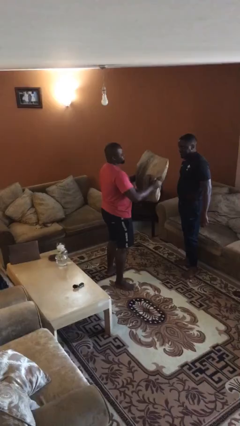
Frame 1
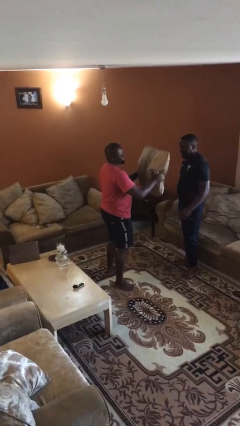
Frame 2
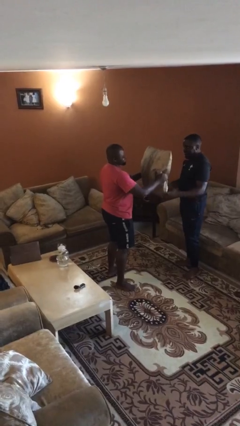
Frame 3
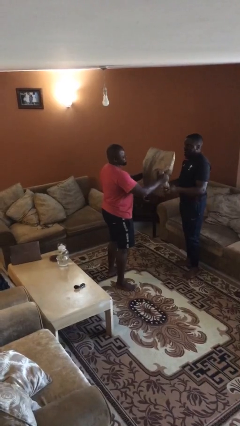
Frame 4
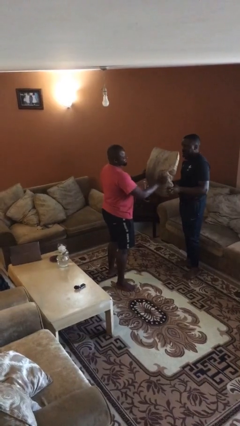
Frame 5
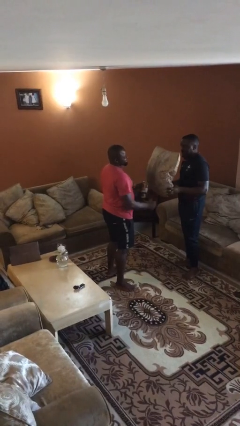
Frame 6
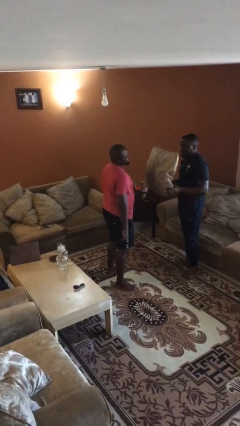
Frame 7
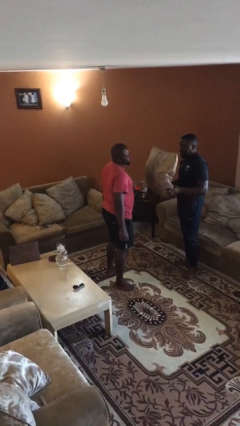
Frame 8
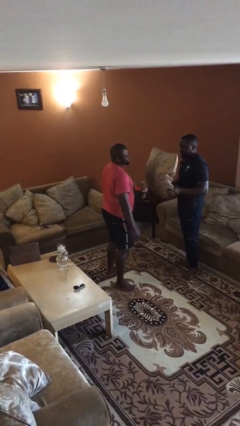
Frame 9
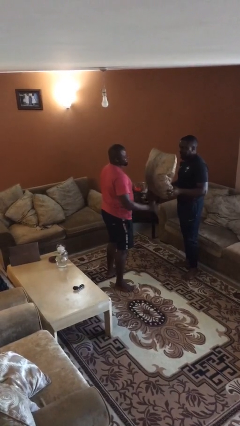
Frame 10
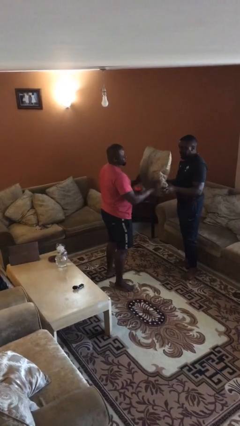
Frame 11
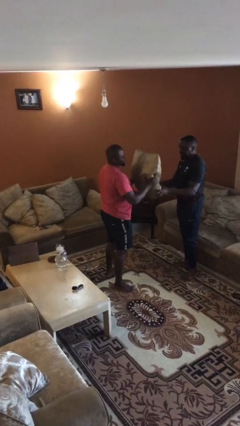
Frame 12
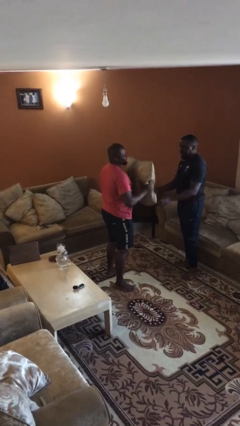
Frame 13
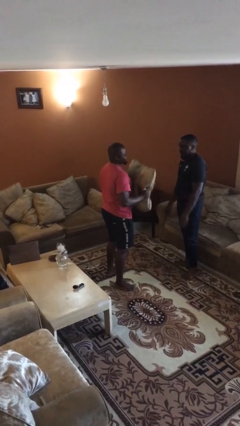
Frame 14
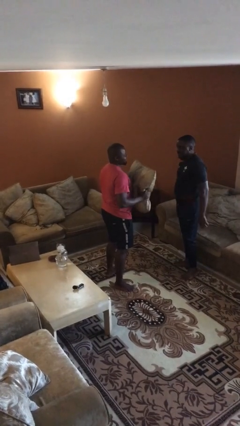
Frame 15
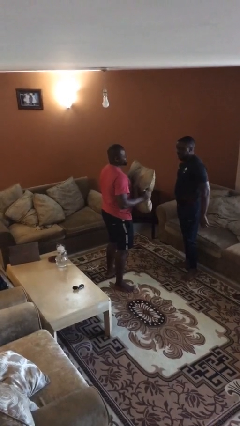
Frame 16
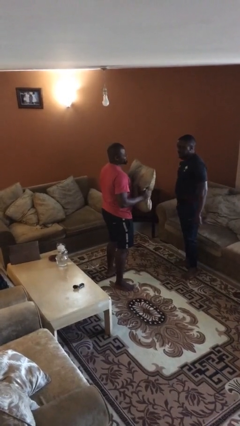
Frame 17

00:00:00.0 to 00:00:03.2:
person transfers object to person

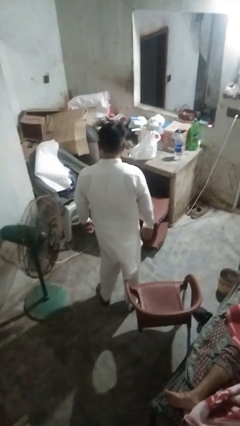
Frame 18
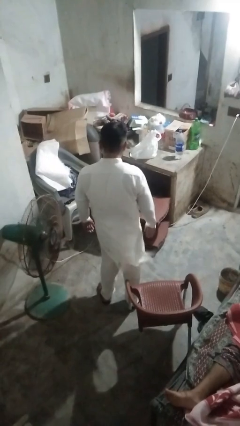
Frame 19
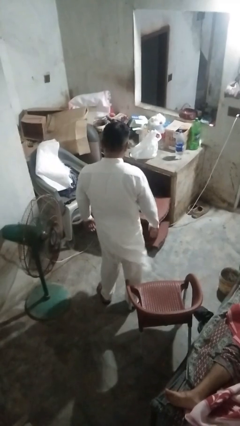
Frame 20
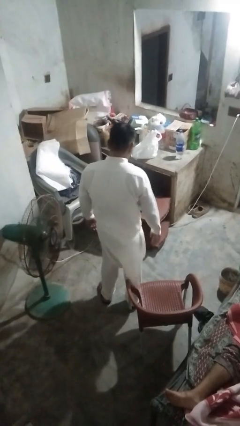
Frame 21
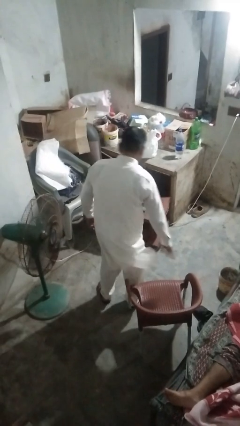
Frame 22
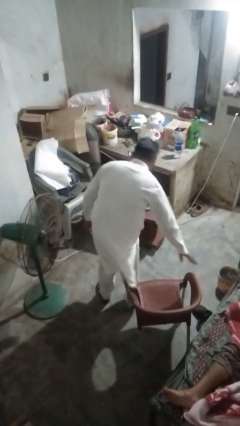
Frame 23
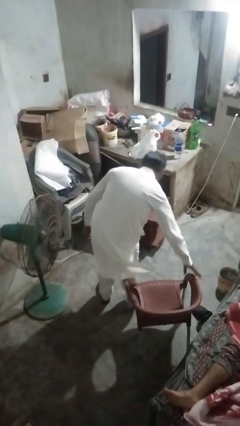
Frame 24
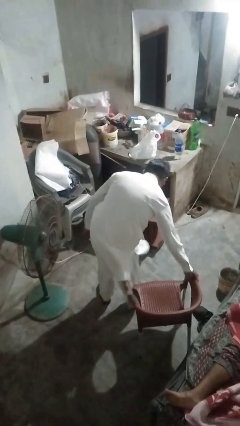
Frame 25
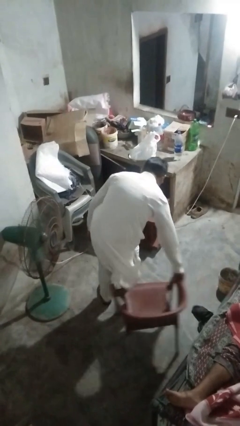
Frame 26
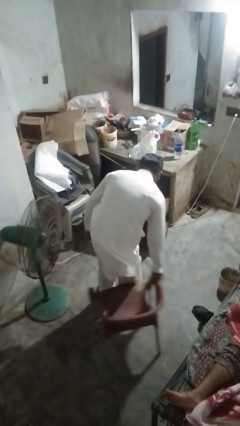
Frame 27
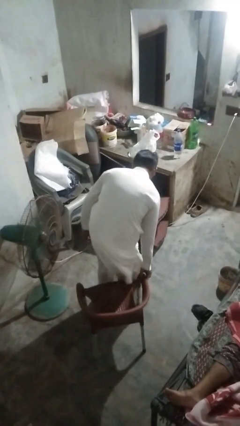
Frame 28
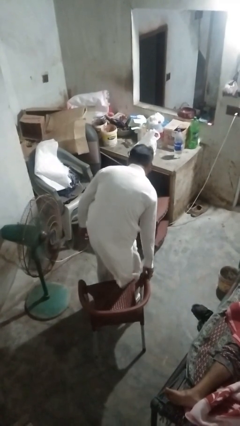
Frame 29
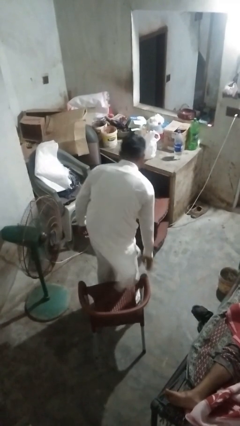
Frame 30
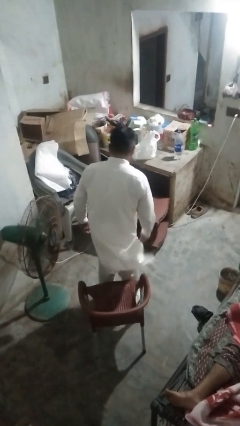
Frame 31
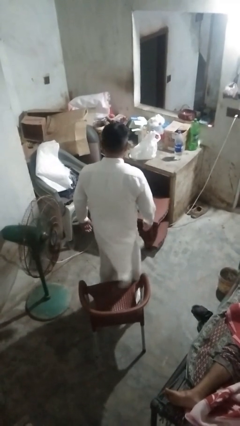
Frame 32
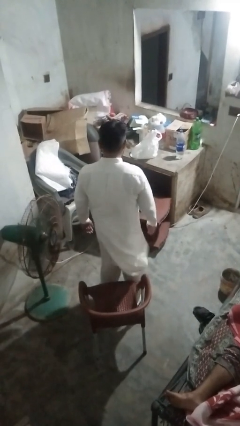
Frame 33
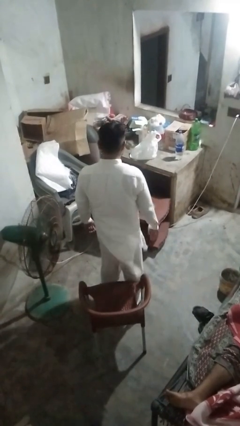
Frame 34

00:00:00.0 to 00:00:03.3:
person pulls out chair

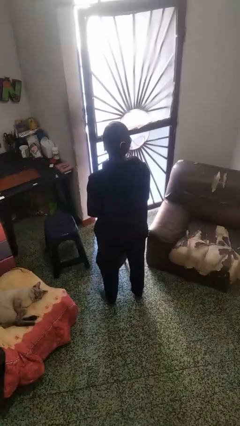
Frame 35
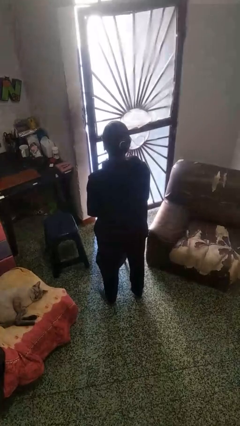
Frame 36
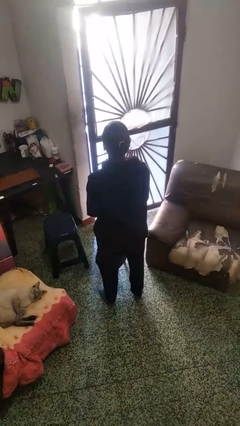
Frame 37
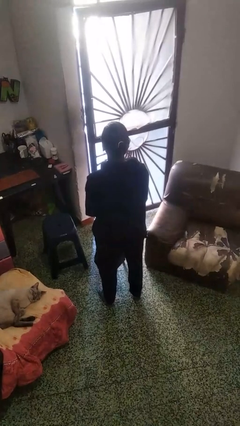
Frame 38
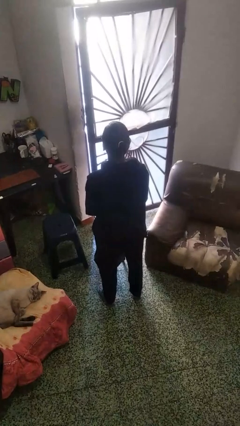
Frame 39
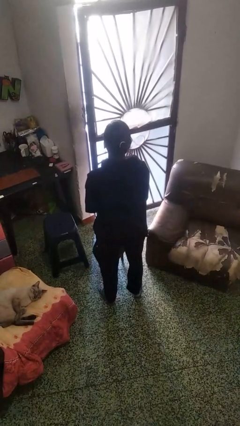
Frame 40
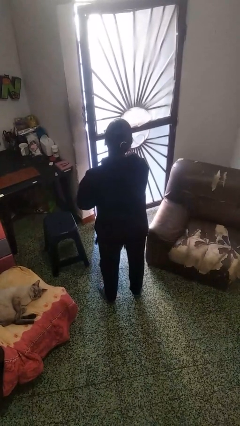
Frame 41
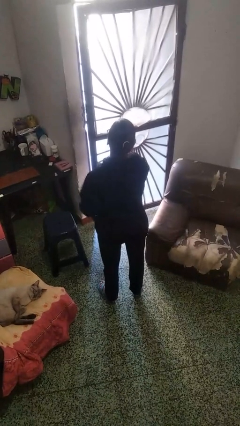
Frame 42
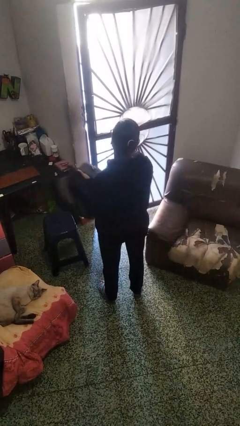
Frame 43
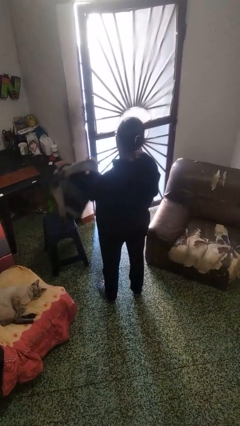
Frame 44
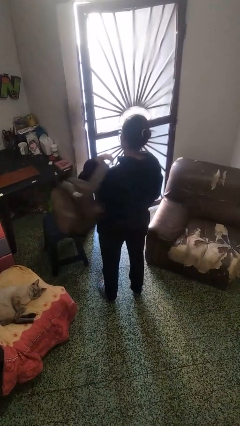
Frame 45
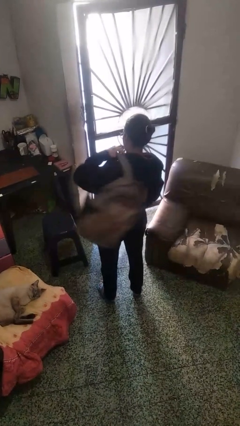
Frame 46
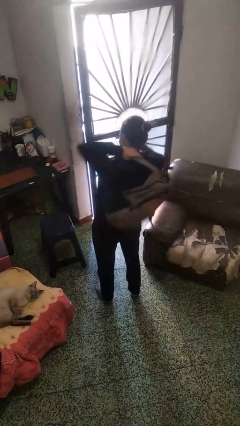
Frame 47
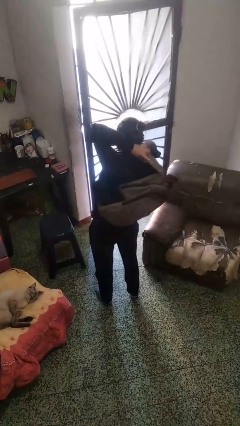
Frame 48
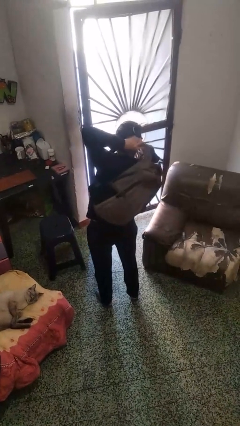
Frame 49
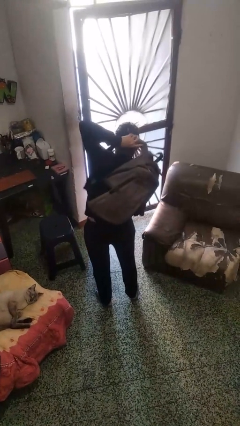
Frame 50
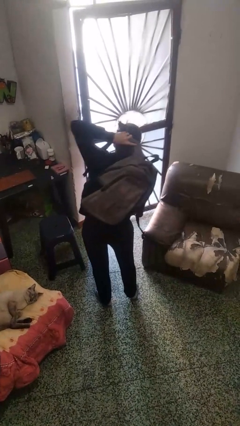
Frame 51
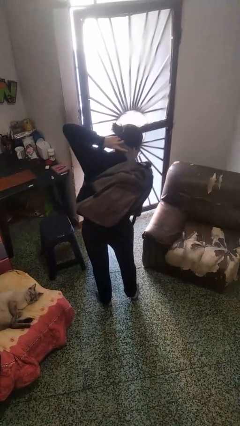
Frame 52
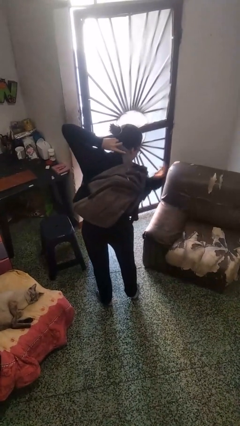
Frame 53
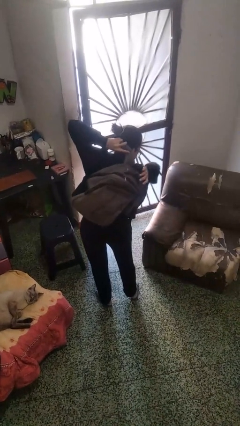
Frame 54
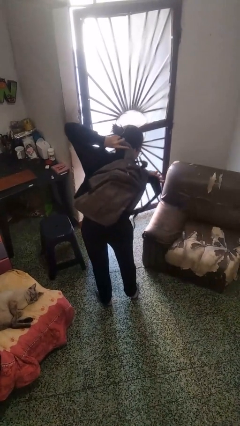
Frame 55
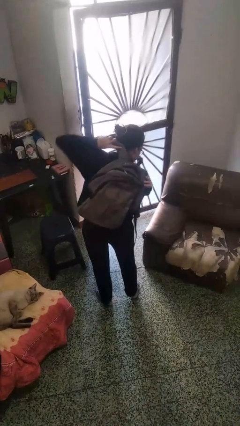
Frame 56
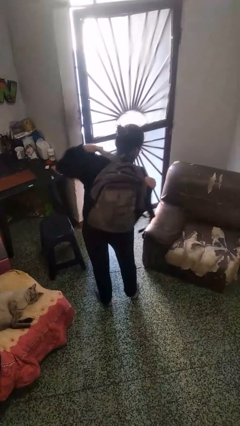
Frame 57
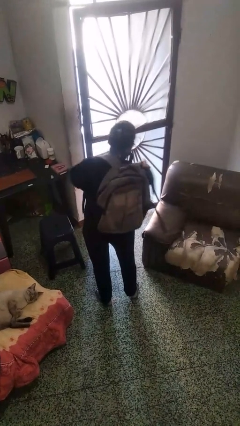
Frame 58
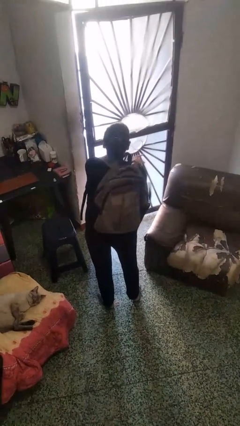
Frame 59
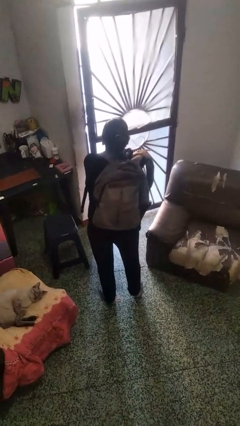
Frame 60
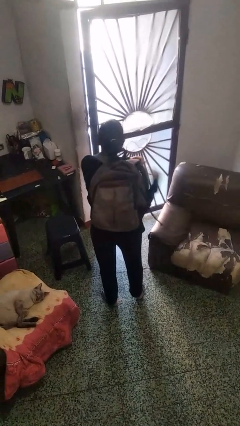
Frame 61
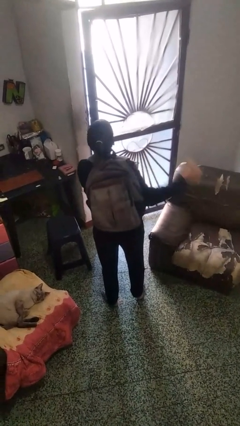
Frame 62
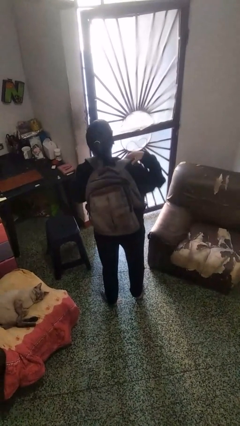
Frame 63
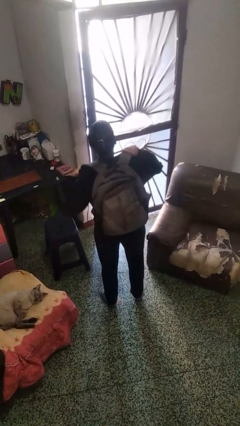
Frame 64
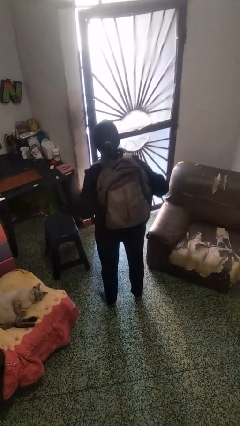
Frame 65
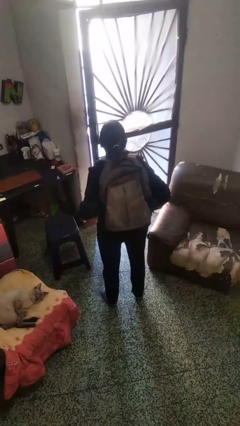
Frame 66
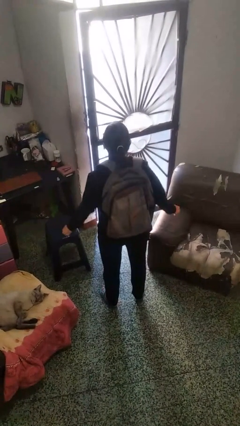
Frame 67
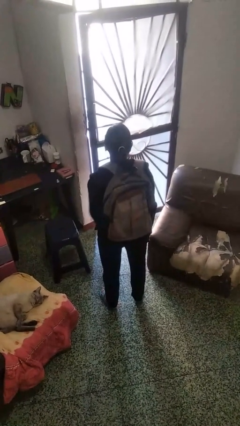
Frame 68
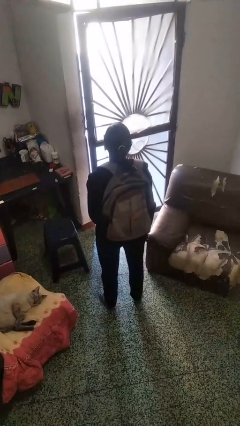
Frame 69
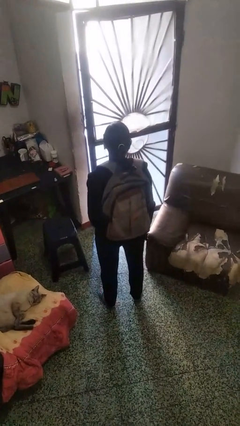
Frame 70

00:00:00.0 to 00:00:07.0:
person puts on backpack

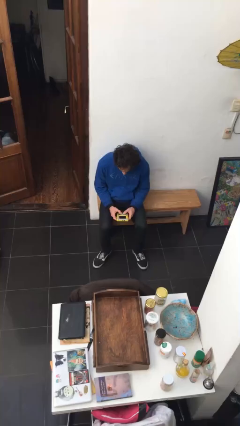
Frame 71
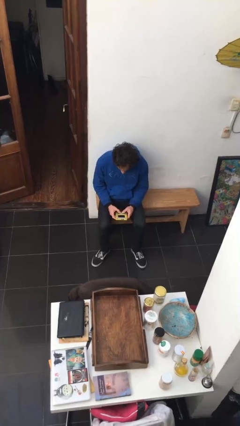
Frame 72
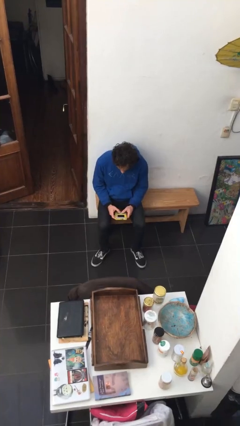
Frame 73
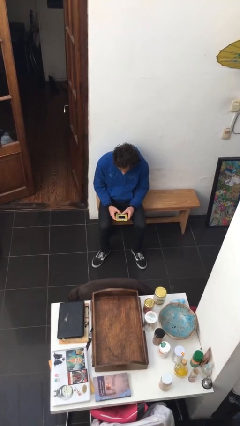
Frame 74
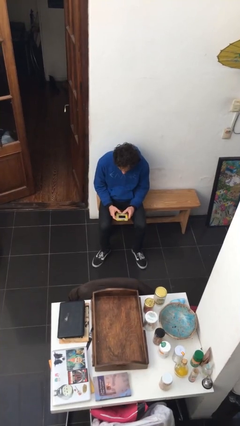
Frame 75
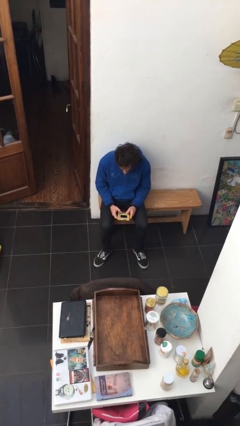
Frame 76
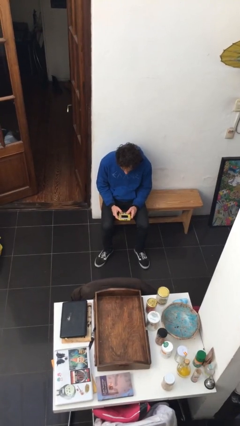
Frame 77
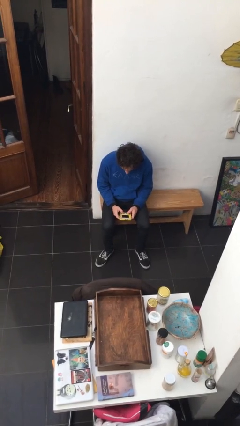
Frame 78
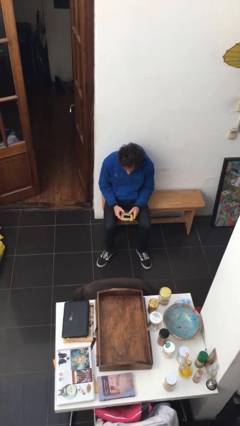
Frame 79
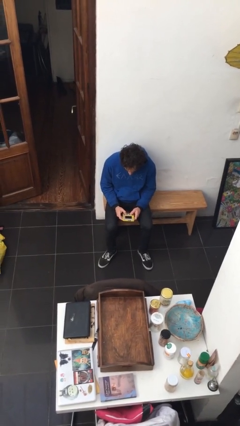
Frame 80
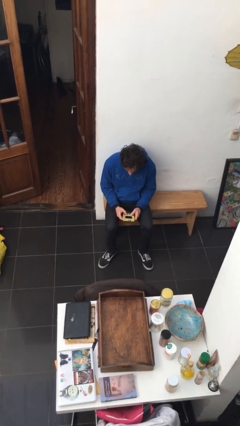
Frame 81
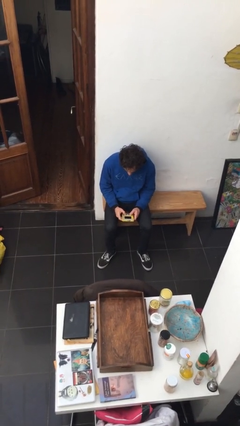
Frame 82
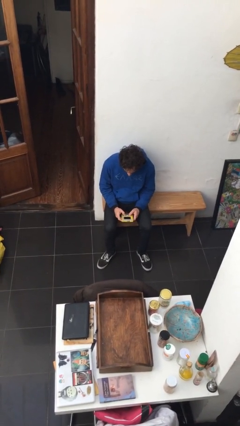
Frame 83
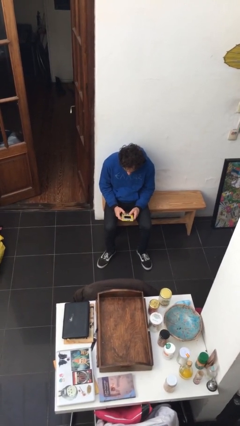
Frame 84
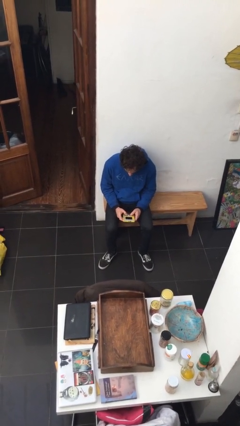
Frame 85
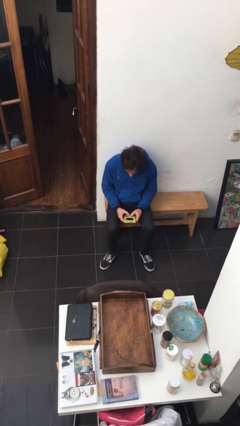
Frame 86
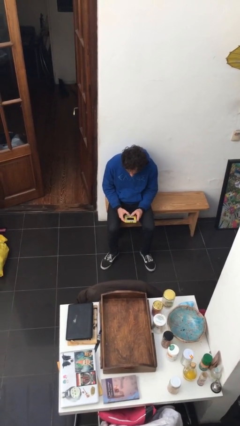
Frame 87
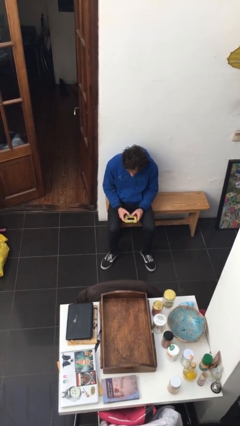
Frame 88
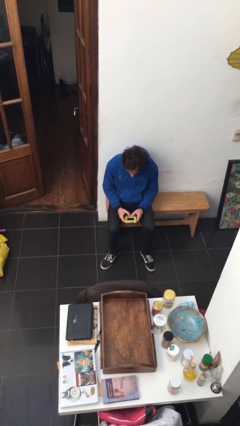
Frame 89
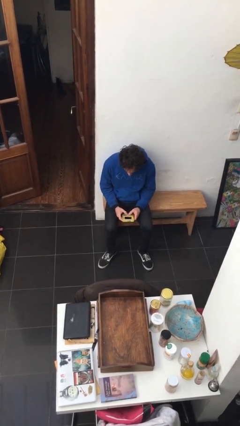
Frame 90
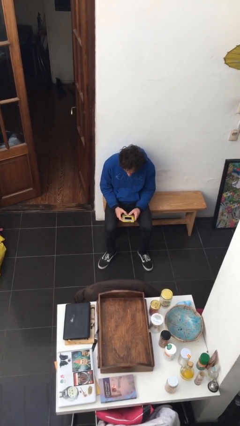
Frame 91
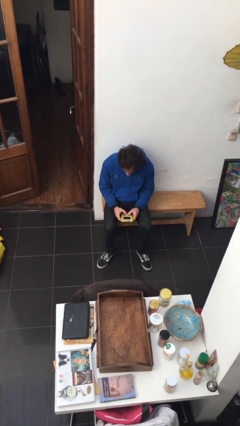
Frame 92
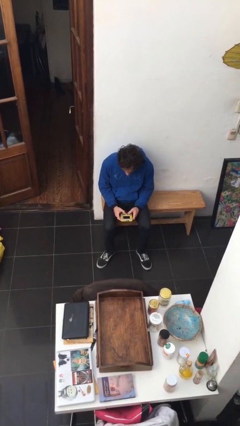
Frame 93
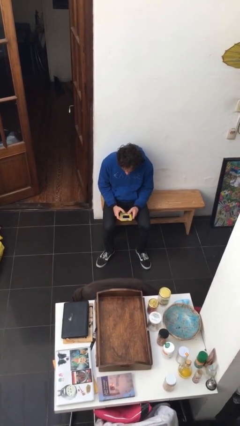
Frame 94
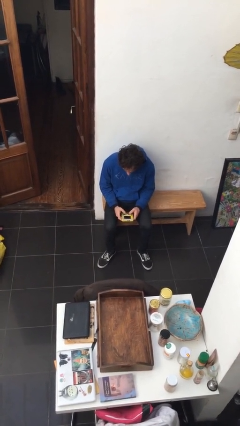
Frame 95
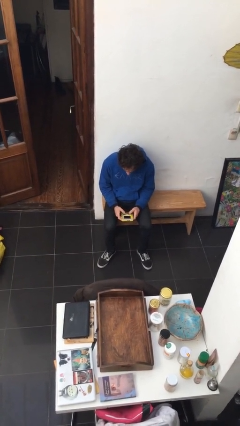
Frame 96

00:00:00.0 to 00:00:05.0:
person interacts with handheld game
